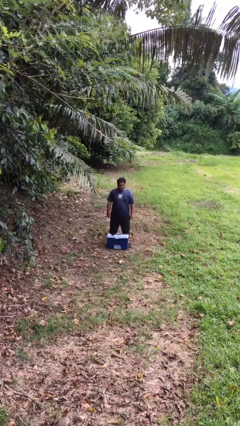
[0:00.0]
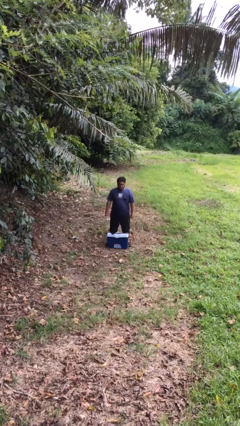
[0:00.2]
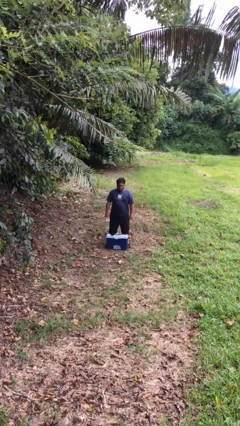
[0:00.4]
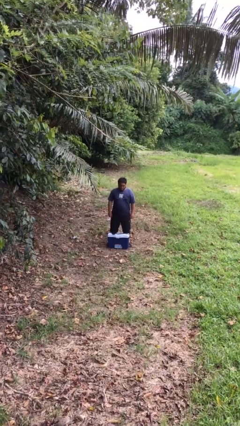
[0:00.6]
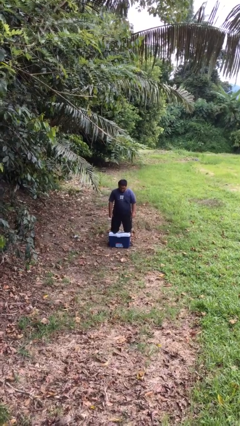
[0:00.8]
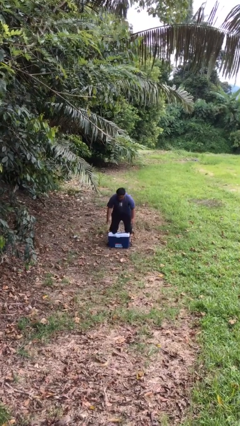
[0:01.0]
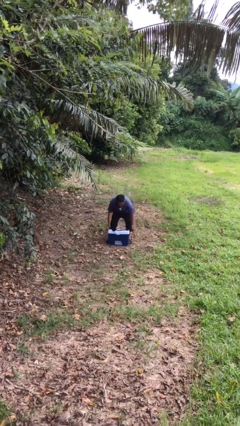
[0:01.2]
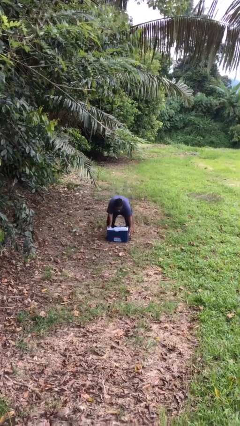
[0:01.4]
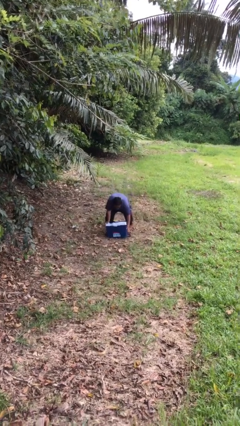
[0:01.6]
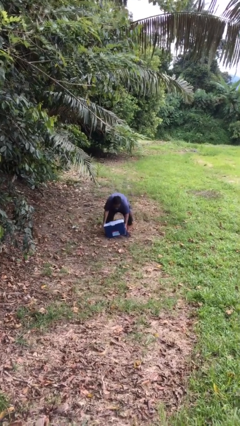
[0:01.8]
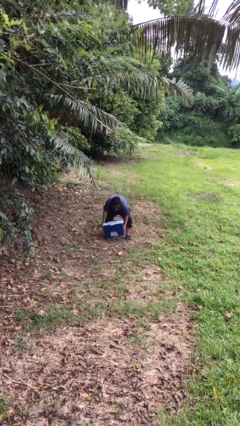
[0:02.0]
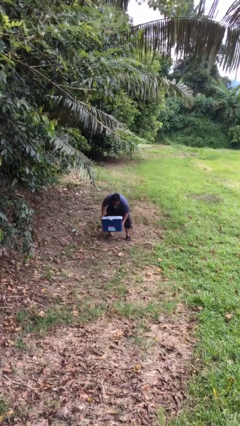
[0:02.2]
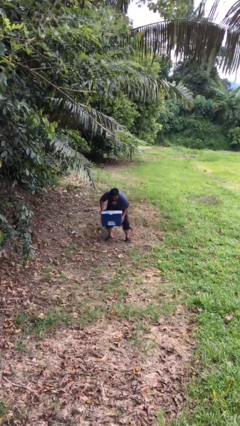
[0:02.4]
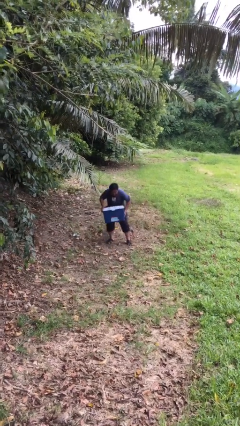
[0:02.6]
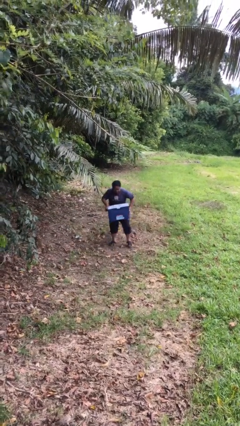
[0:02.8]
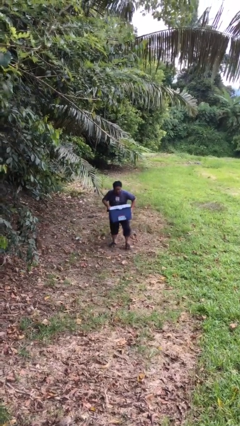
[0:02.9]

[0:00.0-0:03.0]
person picks up object from floor

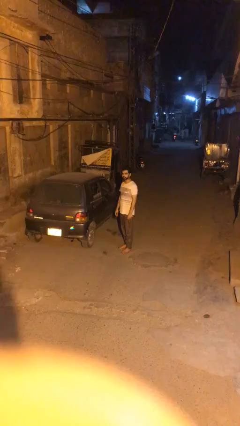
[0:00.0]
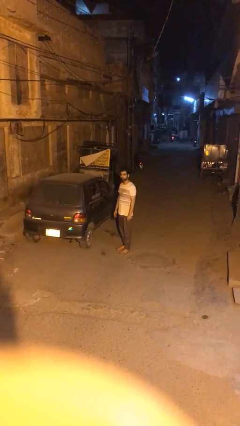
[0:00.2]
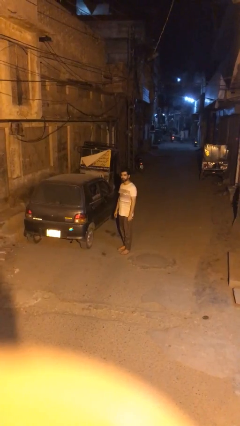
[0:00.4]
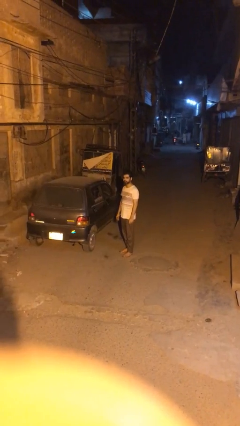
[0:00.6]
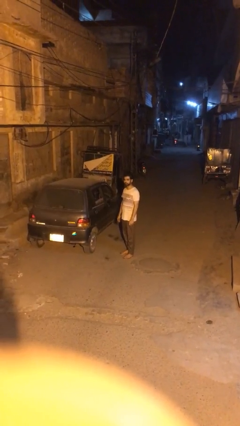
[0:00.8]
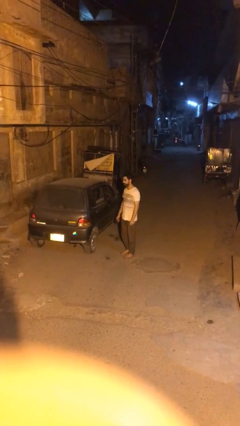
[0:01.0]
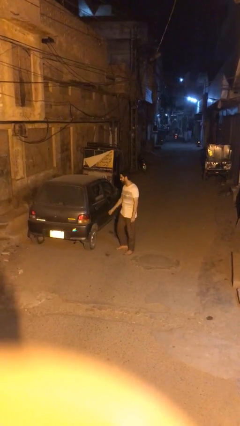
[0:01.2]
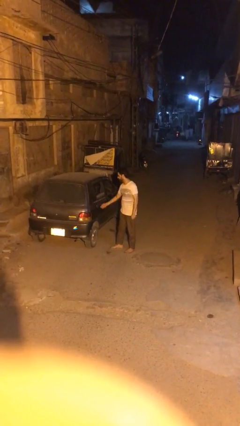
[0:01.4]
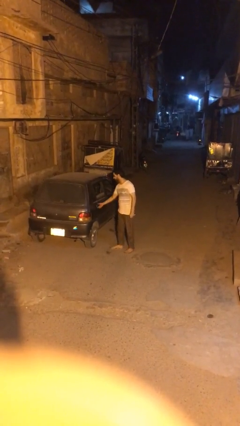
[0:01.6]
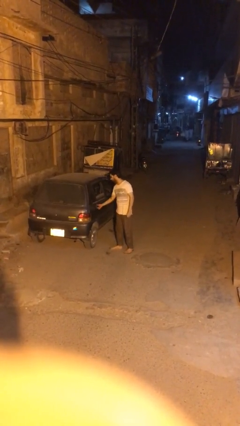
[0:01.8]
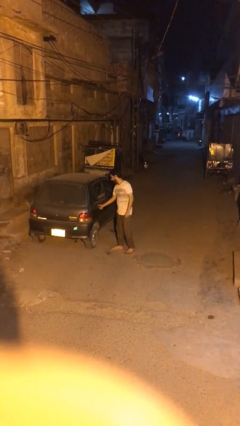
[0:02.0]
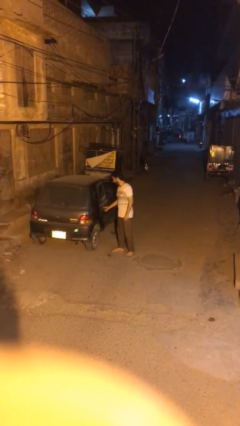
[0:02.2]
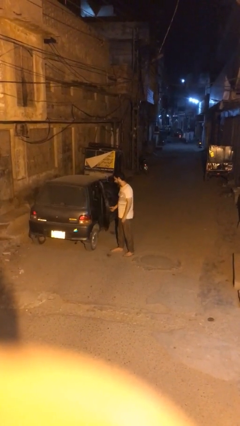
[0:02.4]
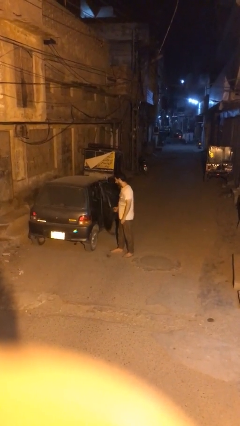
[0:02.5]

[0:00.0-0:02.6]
person opens car door

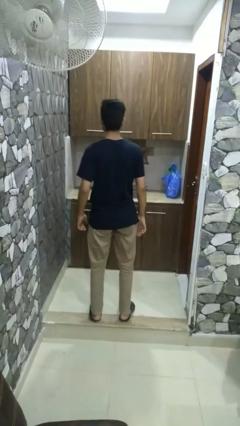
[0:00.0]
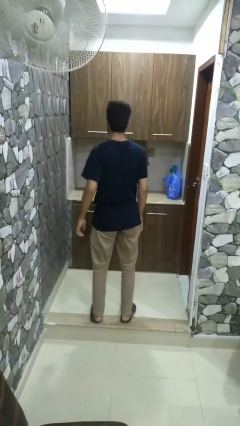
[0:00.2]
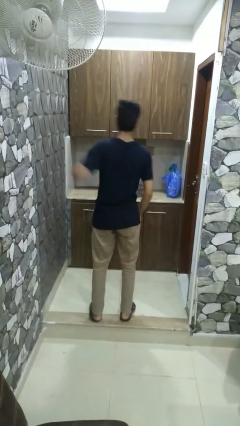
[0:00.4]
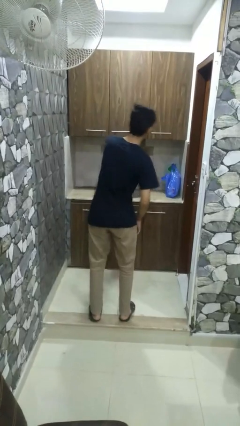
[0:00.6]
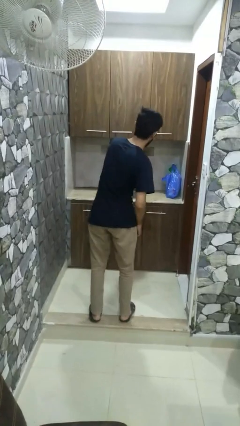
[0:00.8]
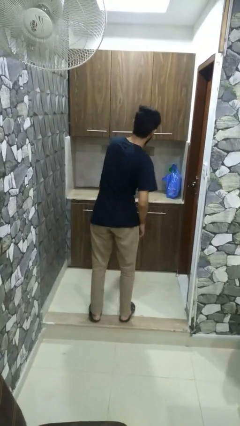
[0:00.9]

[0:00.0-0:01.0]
person karate chop

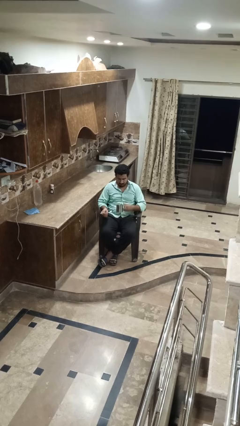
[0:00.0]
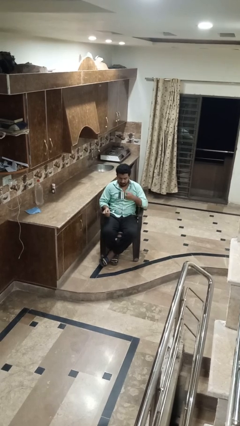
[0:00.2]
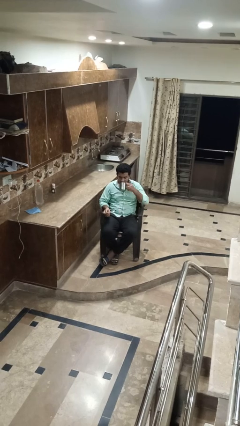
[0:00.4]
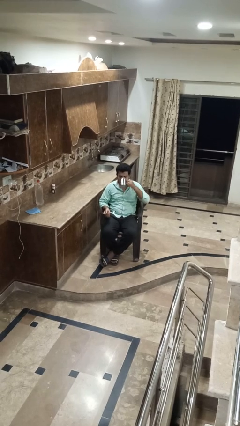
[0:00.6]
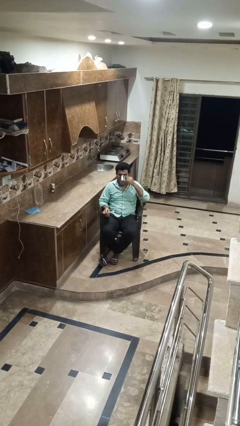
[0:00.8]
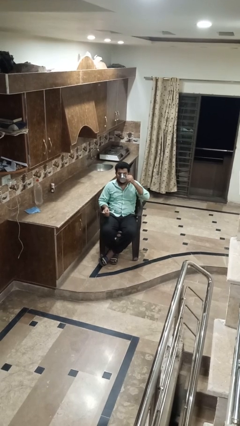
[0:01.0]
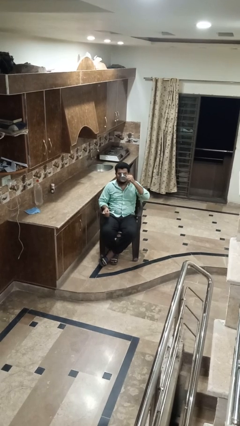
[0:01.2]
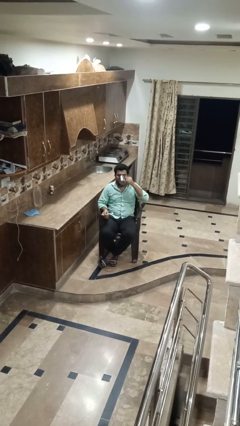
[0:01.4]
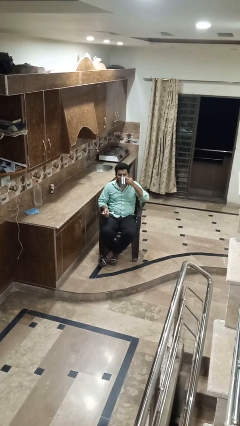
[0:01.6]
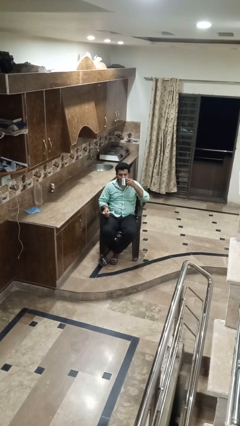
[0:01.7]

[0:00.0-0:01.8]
person drinks from mug

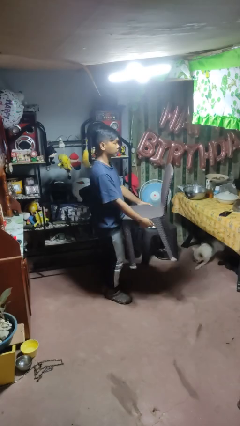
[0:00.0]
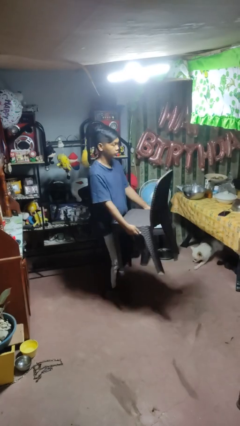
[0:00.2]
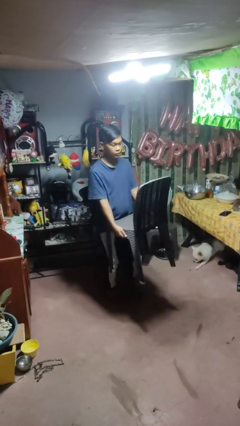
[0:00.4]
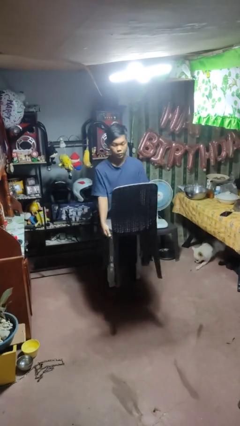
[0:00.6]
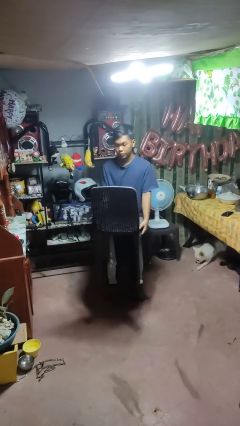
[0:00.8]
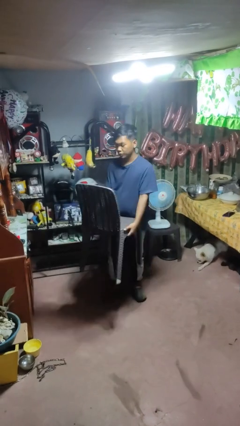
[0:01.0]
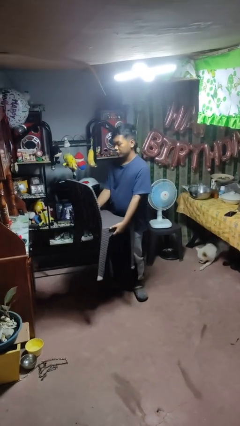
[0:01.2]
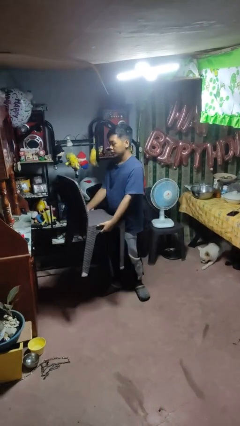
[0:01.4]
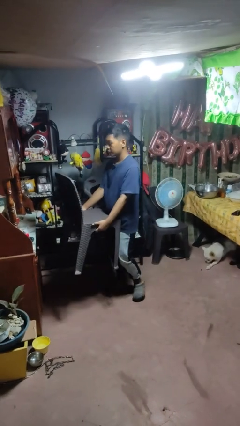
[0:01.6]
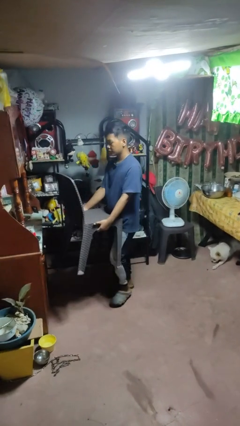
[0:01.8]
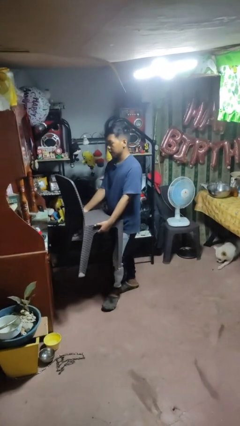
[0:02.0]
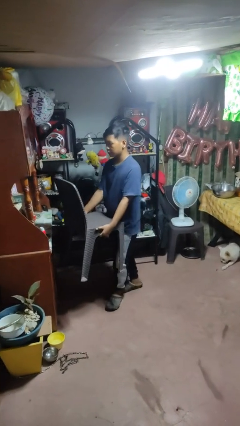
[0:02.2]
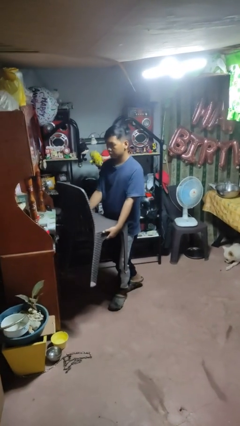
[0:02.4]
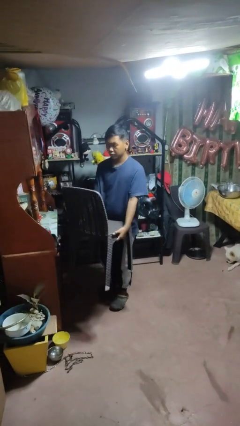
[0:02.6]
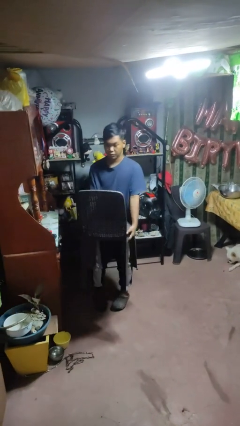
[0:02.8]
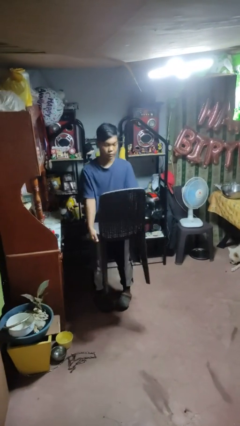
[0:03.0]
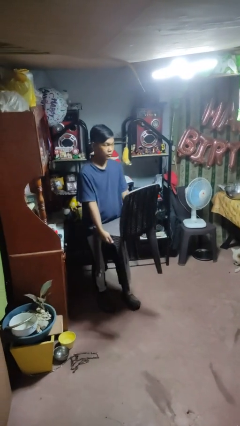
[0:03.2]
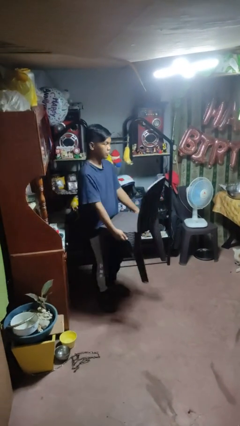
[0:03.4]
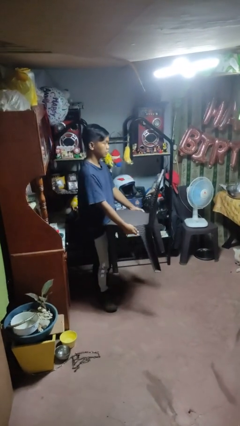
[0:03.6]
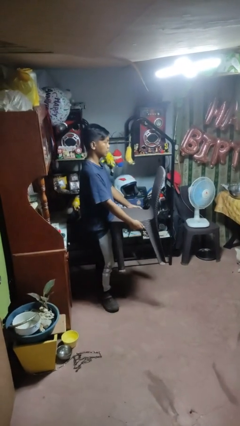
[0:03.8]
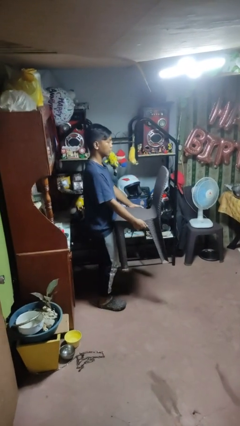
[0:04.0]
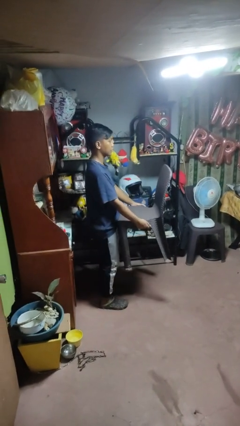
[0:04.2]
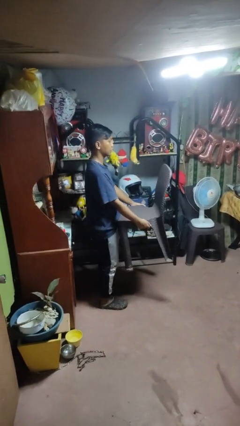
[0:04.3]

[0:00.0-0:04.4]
person carries furniture

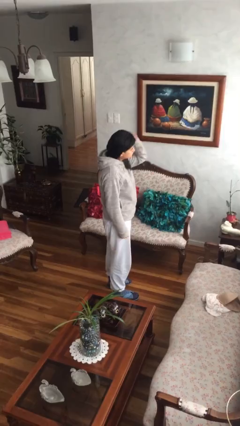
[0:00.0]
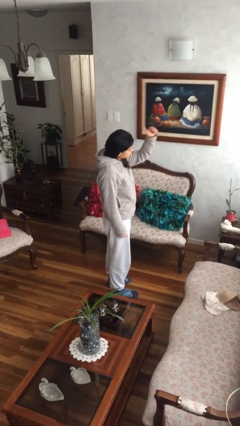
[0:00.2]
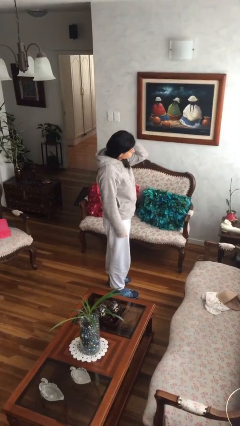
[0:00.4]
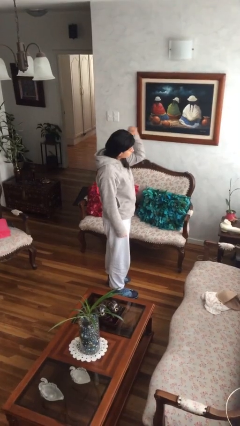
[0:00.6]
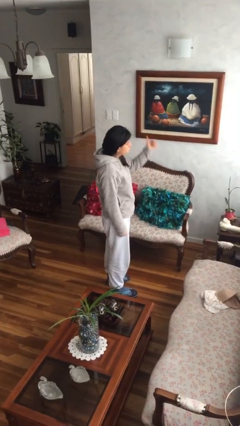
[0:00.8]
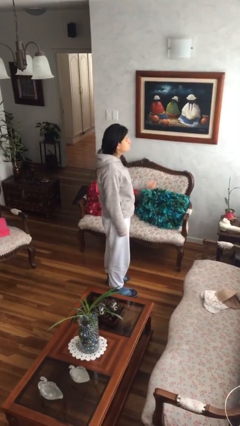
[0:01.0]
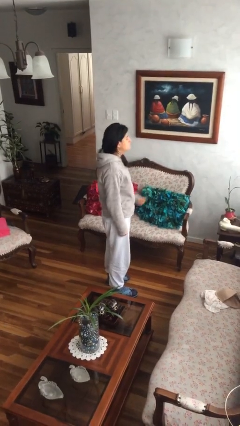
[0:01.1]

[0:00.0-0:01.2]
person gestures behind me

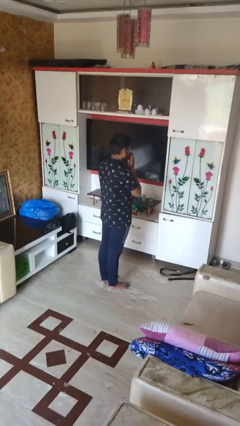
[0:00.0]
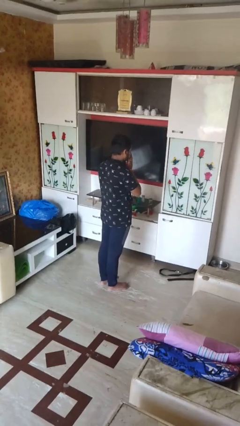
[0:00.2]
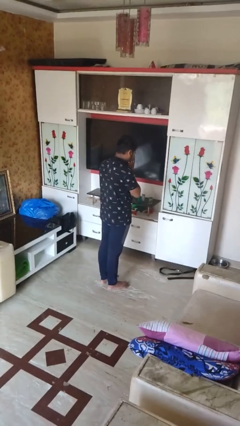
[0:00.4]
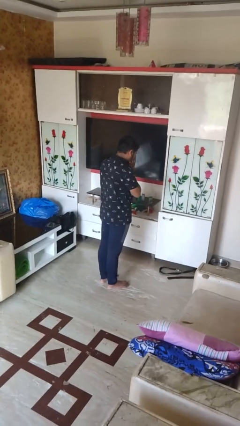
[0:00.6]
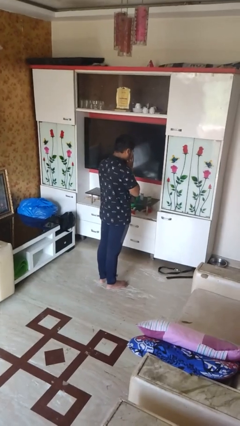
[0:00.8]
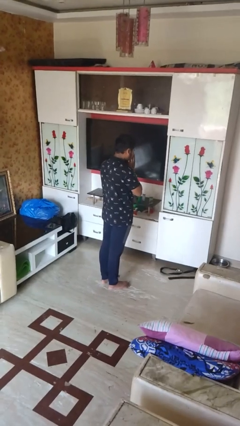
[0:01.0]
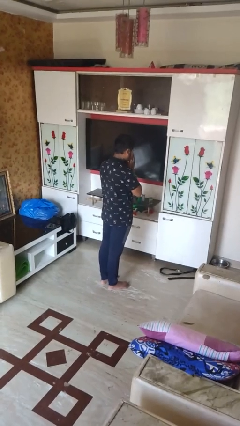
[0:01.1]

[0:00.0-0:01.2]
person sneezes into hand

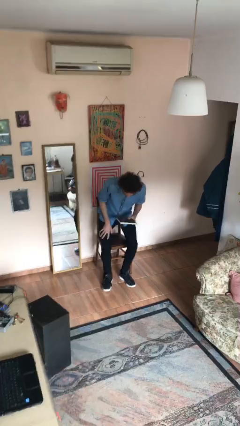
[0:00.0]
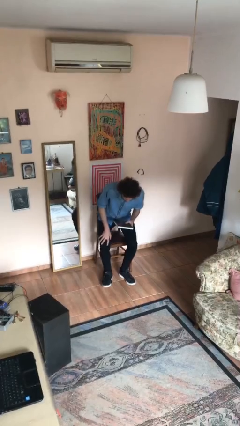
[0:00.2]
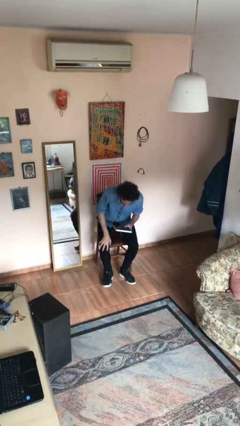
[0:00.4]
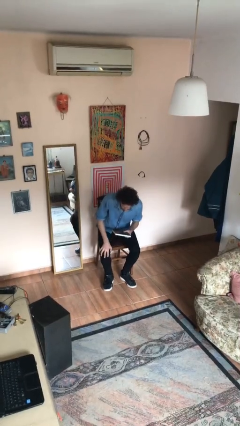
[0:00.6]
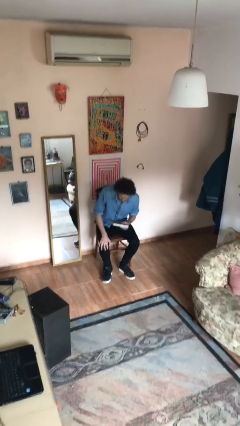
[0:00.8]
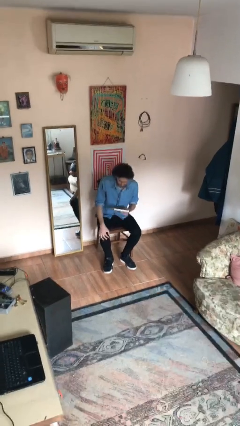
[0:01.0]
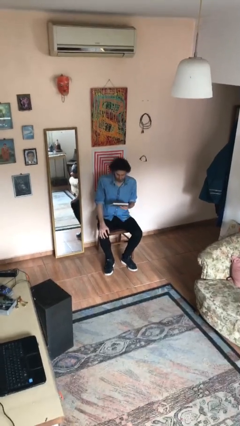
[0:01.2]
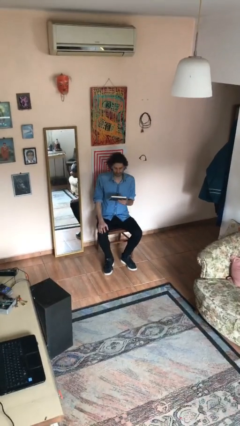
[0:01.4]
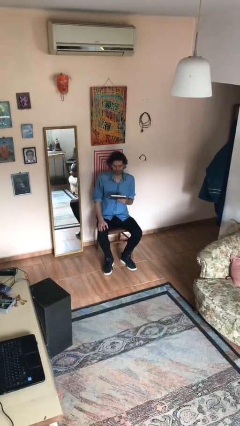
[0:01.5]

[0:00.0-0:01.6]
person sits down
